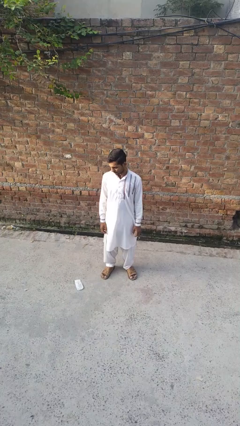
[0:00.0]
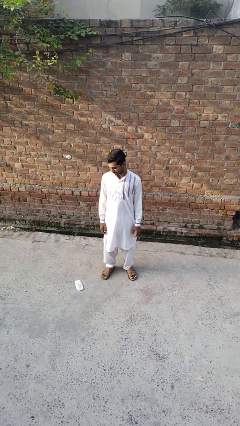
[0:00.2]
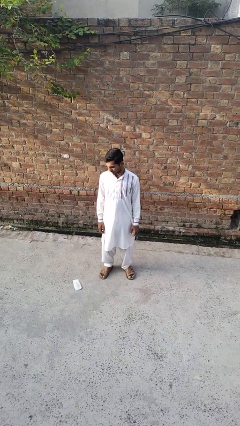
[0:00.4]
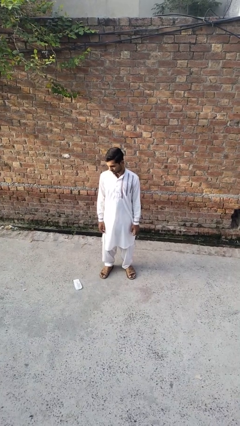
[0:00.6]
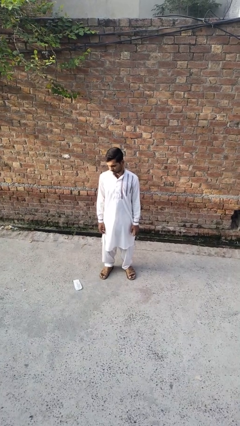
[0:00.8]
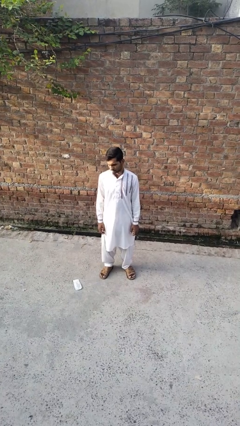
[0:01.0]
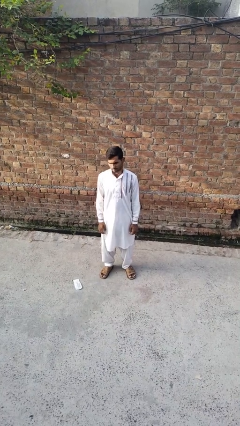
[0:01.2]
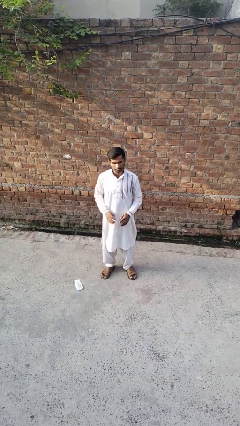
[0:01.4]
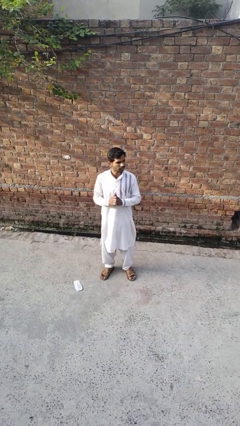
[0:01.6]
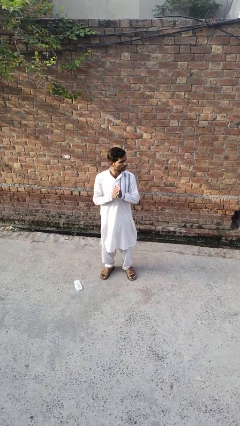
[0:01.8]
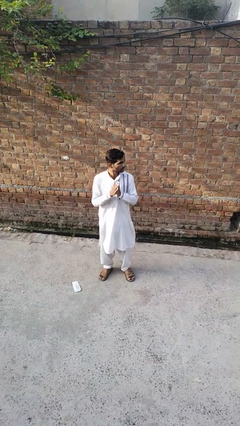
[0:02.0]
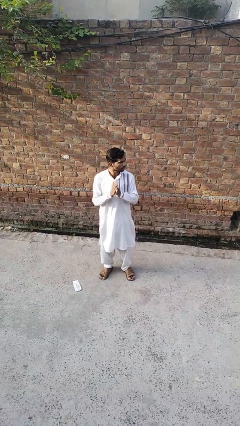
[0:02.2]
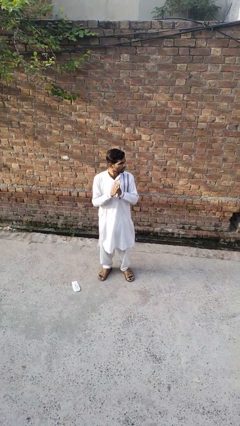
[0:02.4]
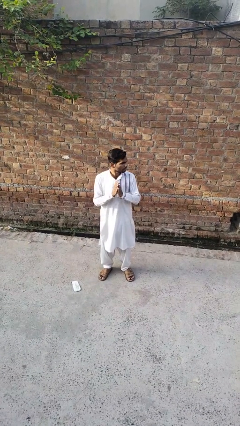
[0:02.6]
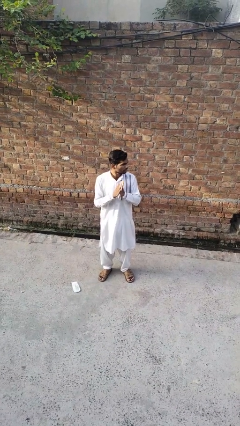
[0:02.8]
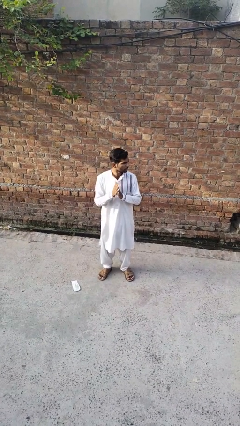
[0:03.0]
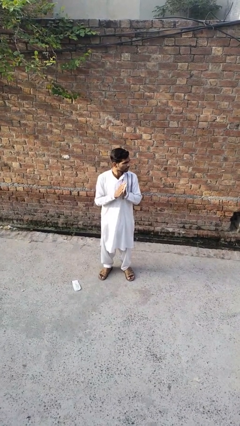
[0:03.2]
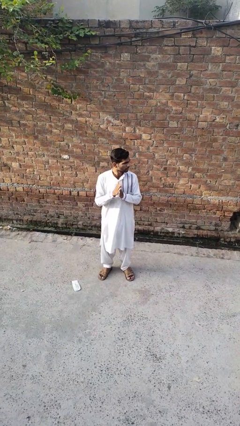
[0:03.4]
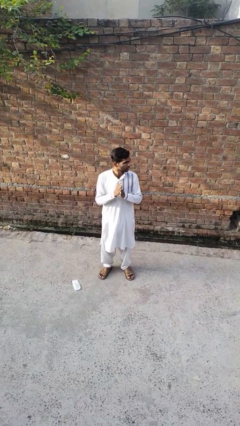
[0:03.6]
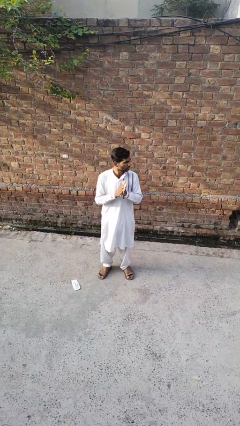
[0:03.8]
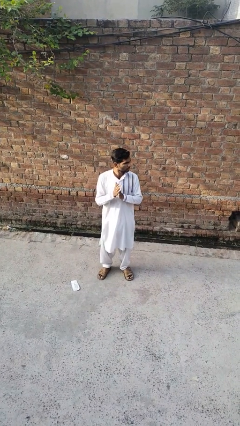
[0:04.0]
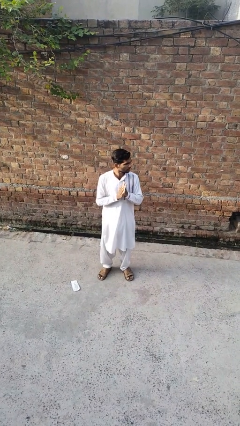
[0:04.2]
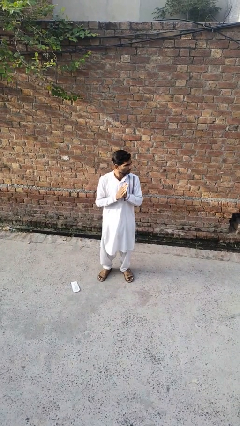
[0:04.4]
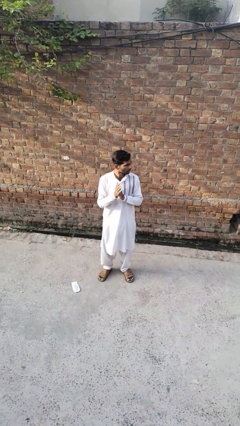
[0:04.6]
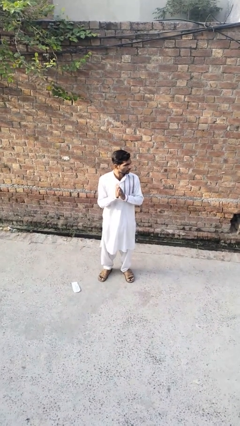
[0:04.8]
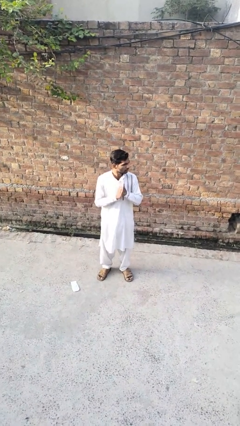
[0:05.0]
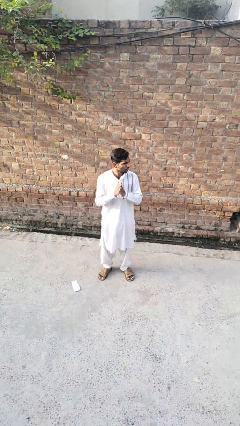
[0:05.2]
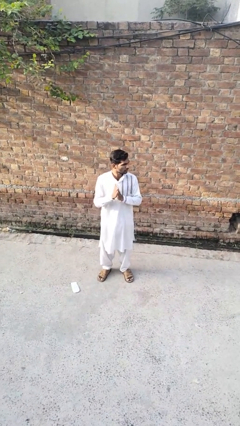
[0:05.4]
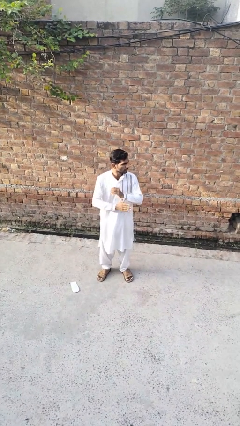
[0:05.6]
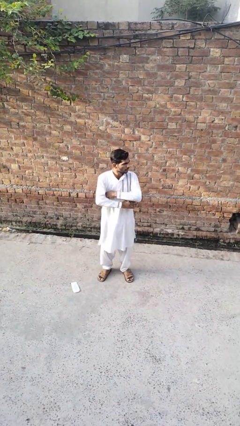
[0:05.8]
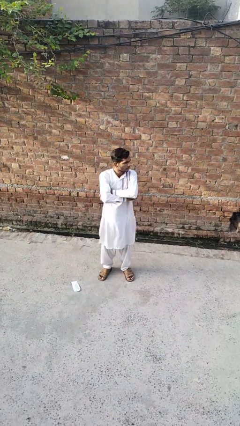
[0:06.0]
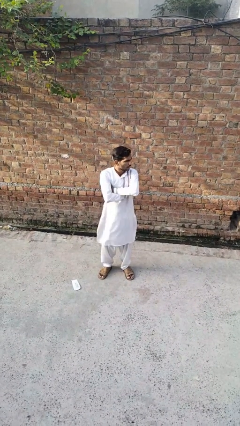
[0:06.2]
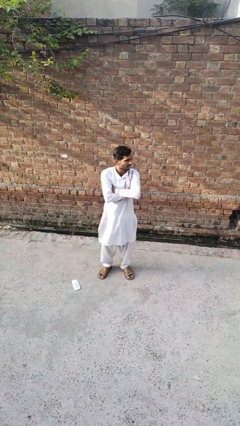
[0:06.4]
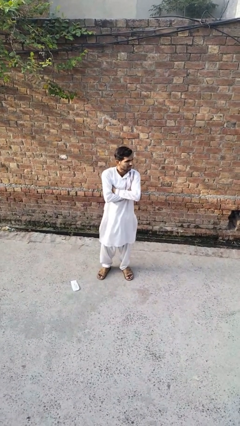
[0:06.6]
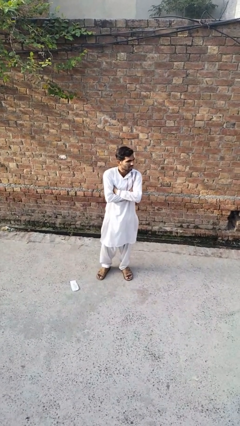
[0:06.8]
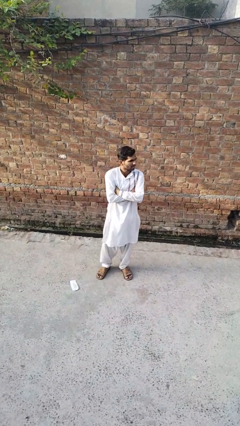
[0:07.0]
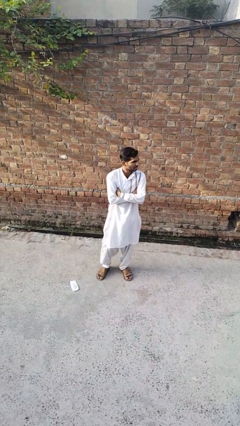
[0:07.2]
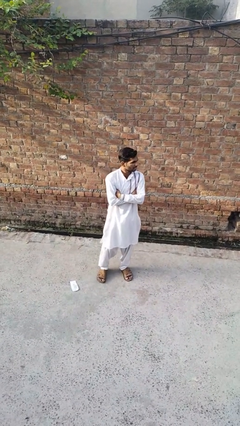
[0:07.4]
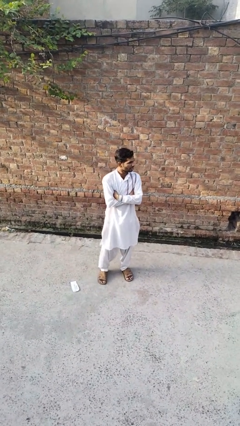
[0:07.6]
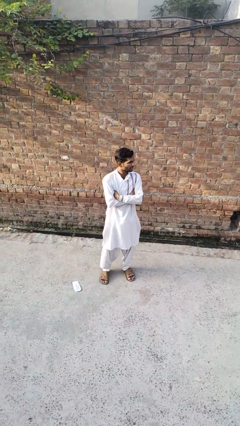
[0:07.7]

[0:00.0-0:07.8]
person blows into hands

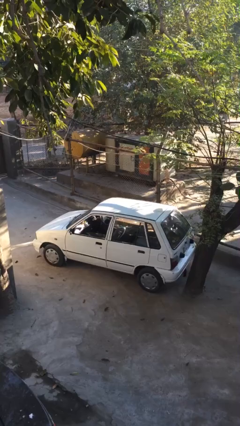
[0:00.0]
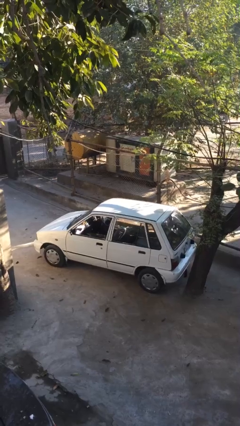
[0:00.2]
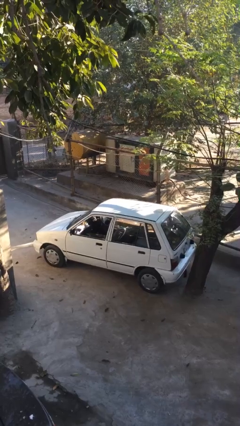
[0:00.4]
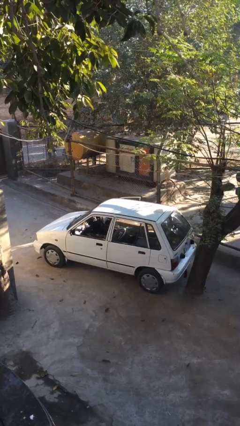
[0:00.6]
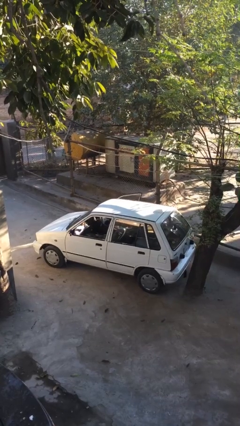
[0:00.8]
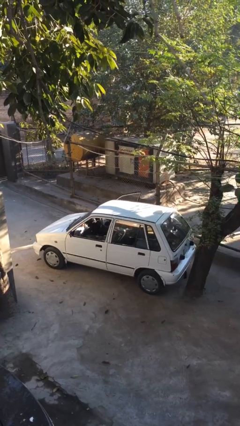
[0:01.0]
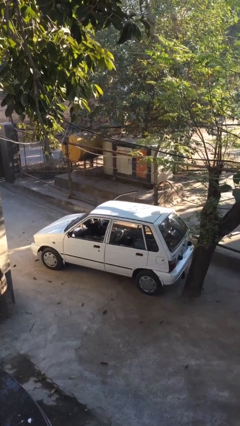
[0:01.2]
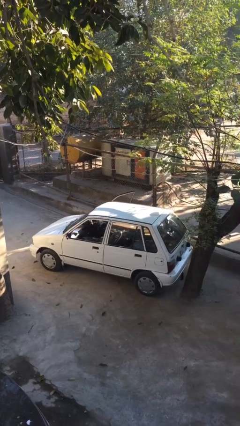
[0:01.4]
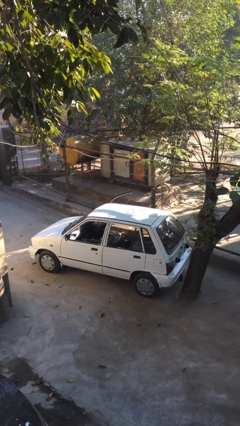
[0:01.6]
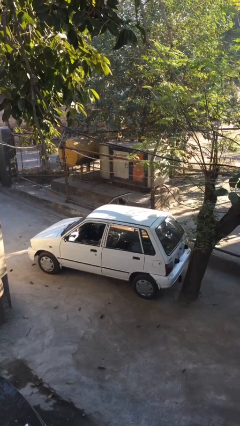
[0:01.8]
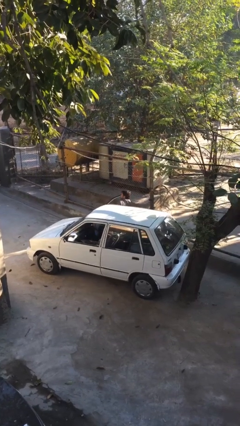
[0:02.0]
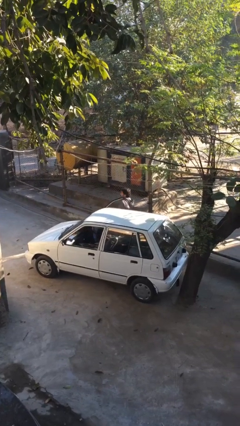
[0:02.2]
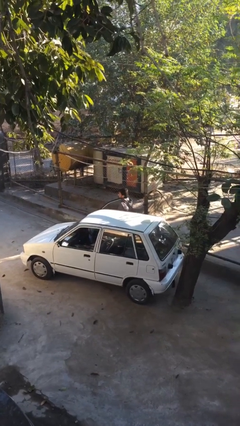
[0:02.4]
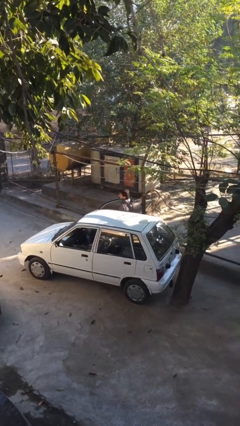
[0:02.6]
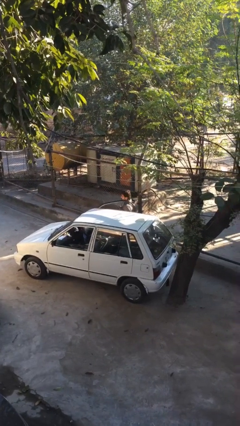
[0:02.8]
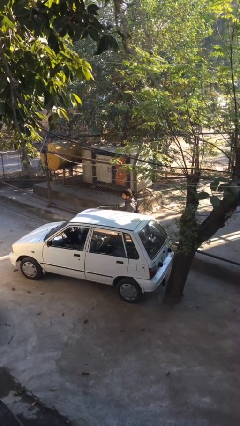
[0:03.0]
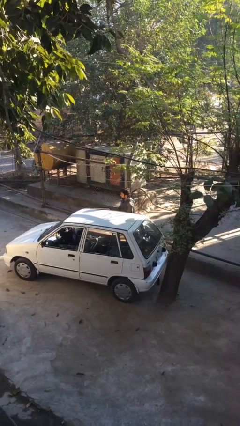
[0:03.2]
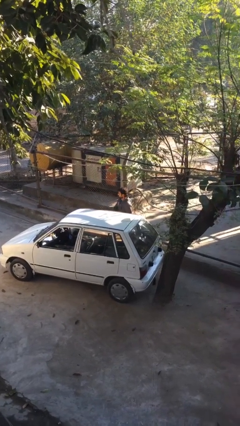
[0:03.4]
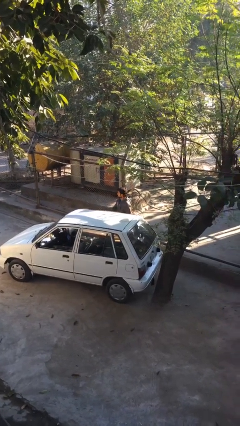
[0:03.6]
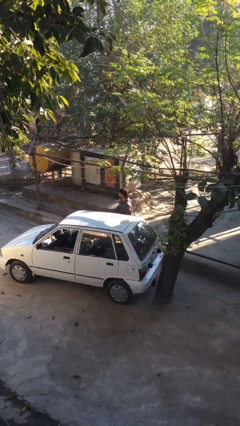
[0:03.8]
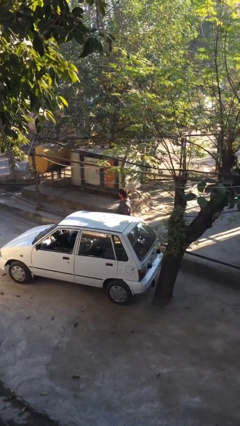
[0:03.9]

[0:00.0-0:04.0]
person exits car

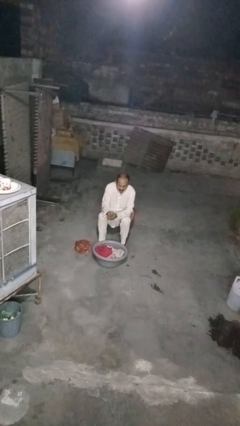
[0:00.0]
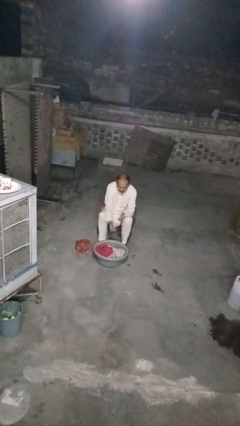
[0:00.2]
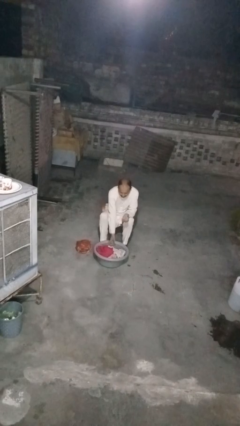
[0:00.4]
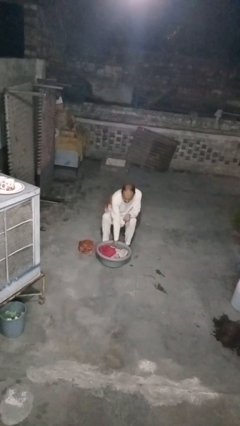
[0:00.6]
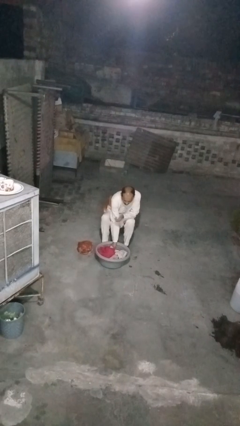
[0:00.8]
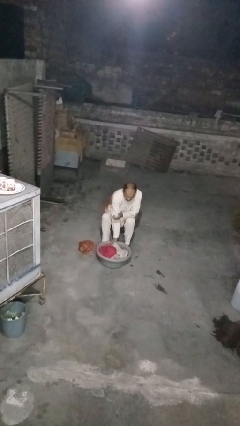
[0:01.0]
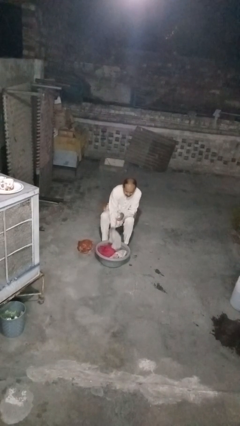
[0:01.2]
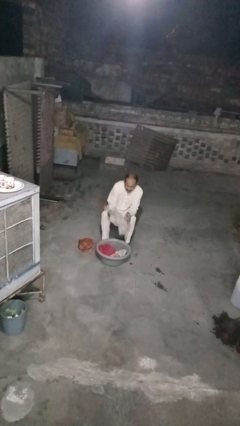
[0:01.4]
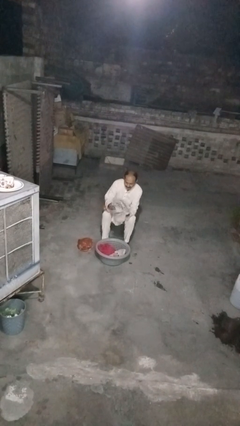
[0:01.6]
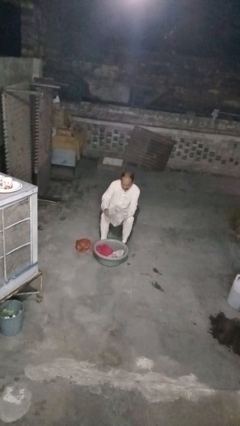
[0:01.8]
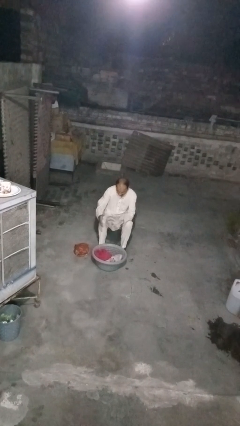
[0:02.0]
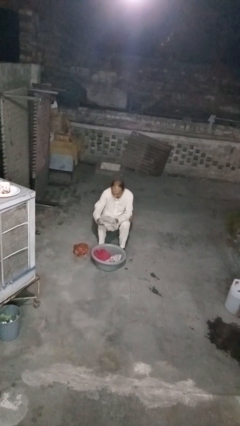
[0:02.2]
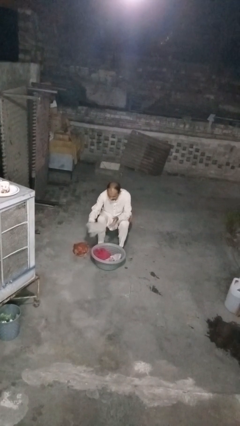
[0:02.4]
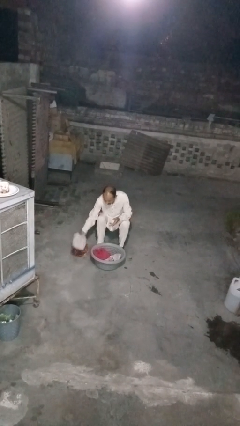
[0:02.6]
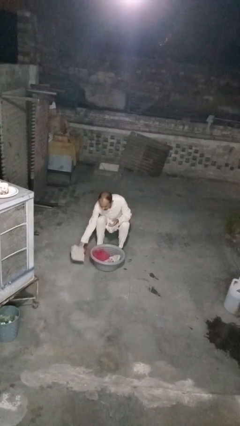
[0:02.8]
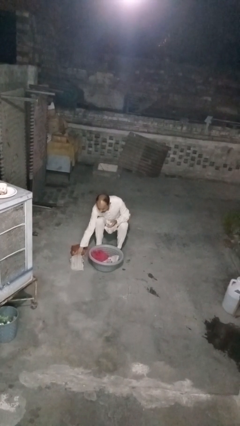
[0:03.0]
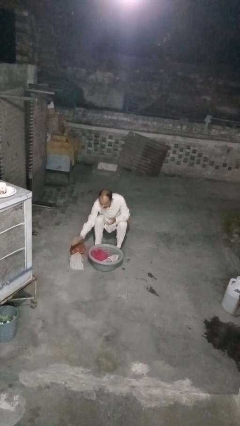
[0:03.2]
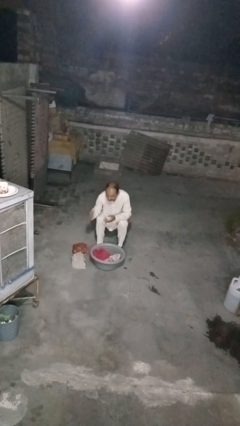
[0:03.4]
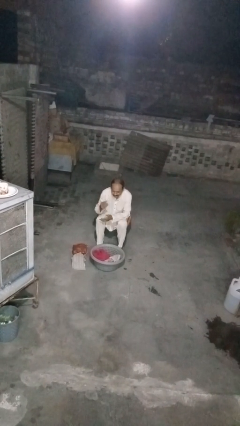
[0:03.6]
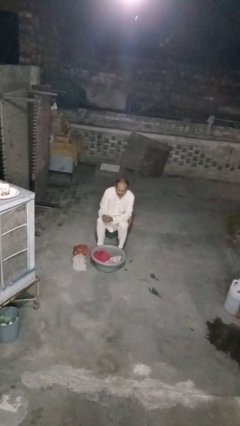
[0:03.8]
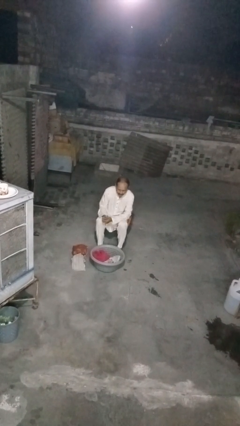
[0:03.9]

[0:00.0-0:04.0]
person takes object from basket

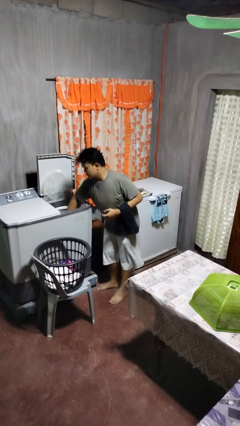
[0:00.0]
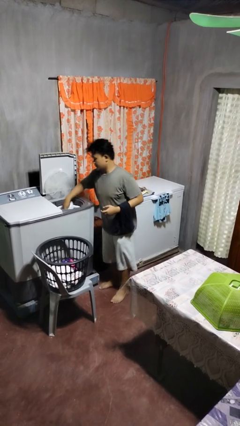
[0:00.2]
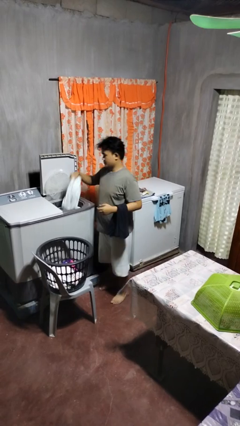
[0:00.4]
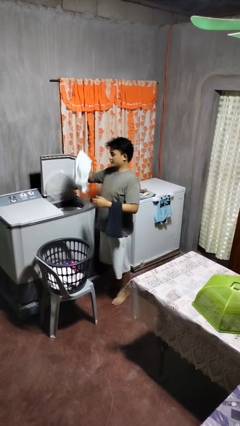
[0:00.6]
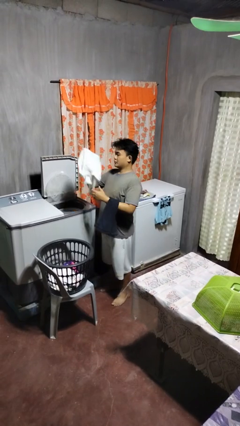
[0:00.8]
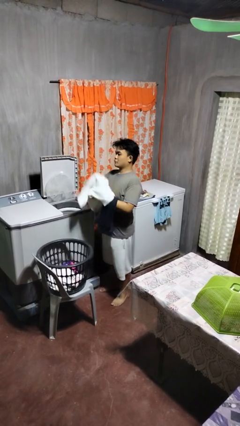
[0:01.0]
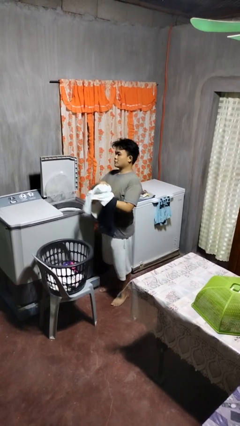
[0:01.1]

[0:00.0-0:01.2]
person unloads dryer

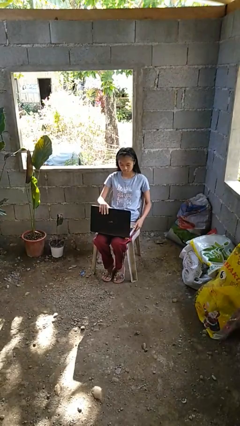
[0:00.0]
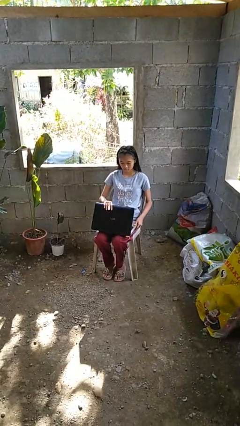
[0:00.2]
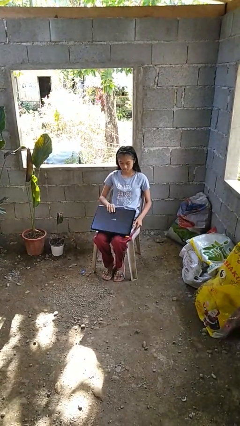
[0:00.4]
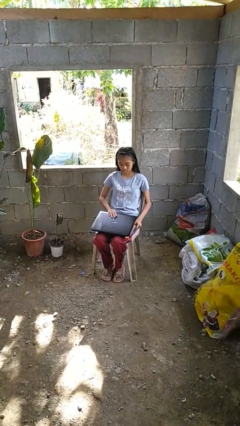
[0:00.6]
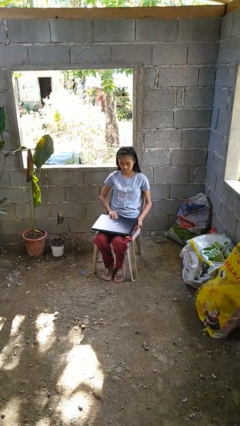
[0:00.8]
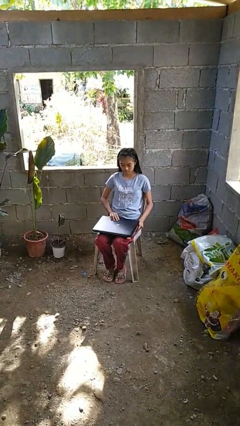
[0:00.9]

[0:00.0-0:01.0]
person closes laptop
